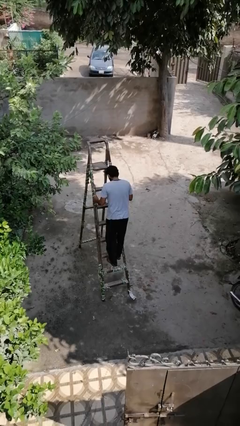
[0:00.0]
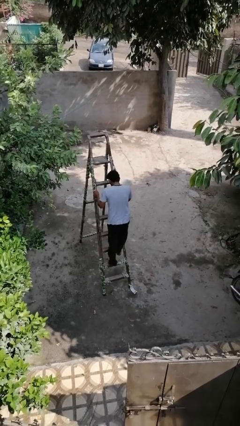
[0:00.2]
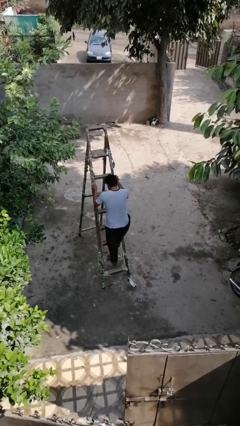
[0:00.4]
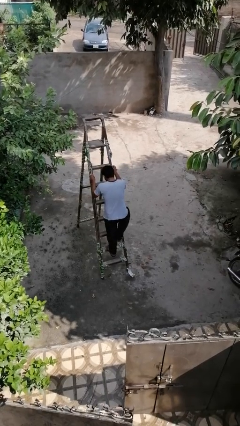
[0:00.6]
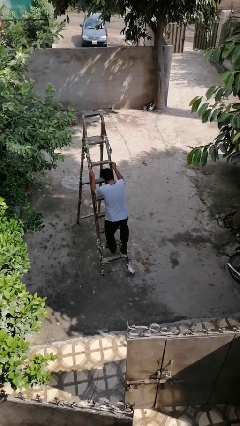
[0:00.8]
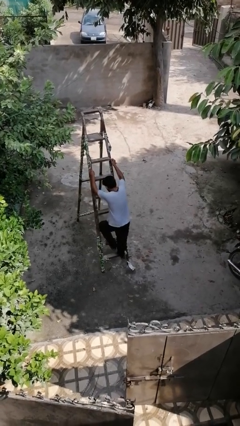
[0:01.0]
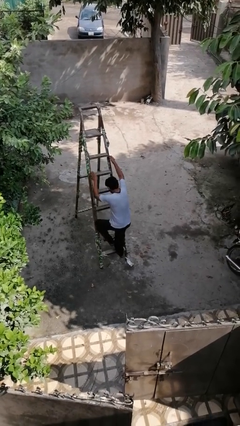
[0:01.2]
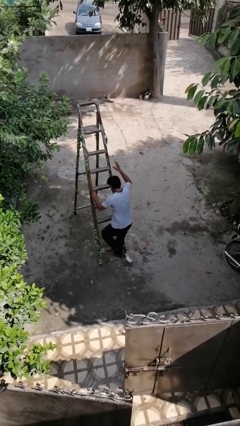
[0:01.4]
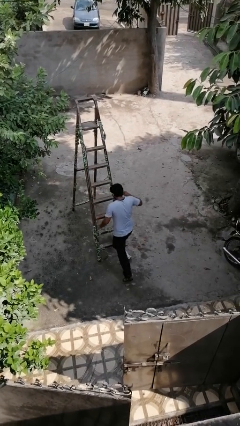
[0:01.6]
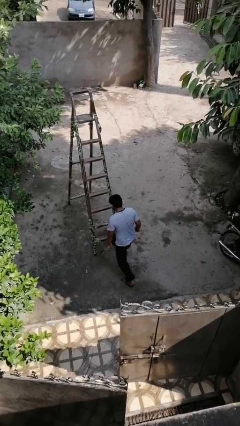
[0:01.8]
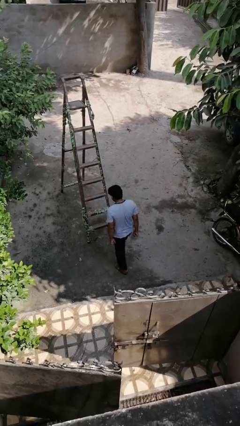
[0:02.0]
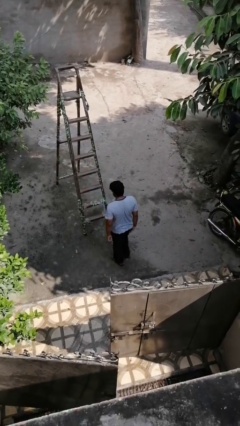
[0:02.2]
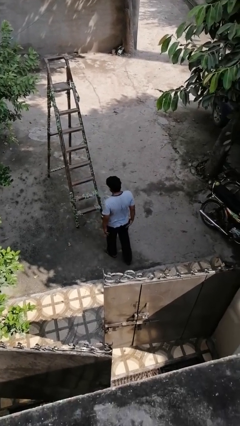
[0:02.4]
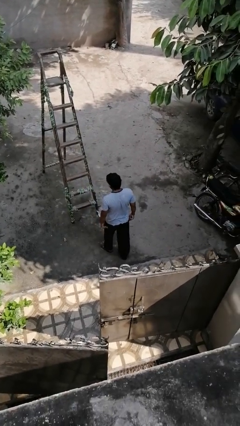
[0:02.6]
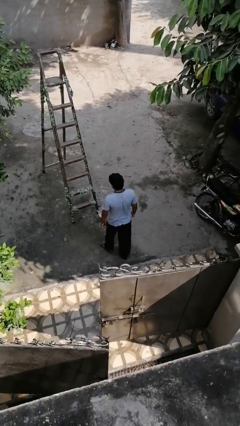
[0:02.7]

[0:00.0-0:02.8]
person climbs down ladder

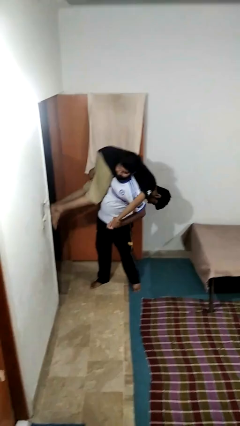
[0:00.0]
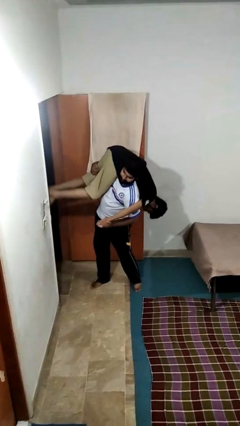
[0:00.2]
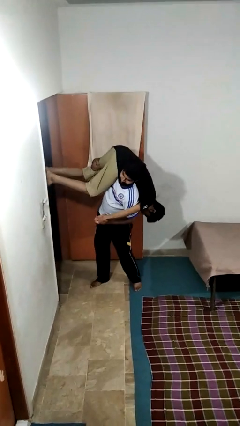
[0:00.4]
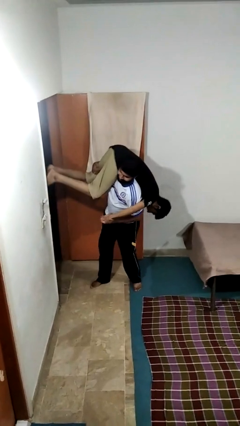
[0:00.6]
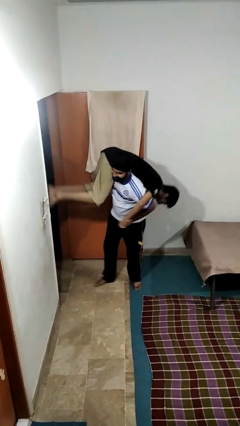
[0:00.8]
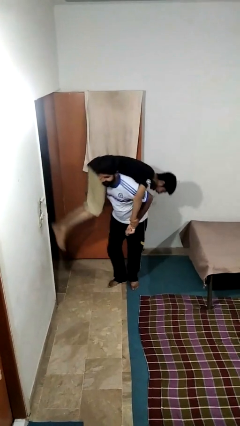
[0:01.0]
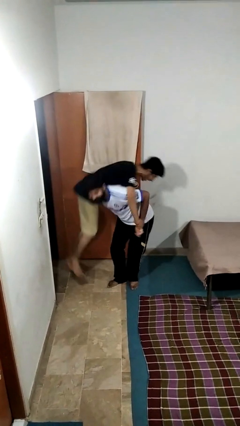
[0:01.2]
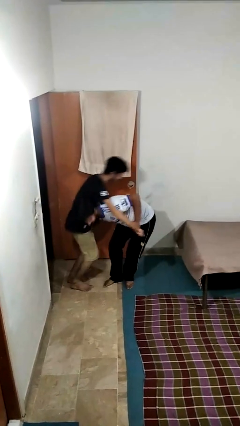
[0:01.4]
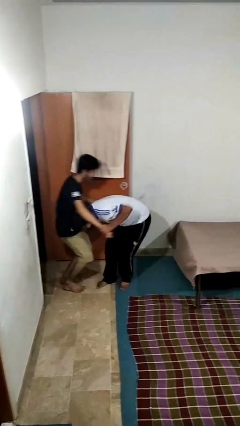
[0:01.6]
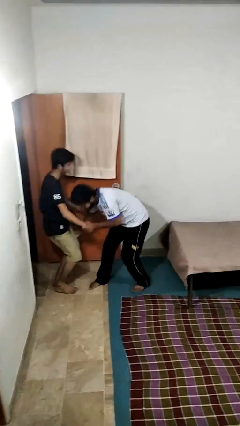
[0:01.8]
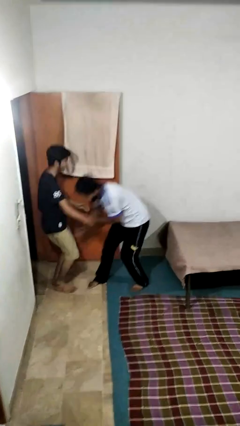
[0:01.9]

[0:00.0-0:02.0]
person puts down person

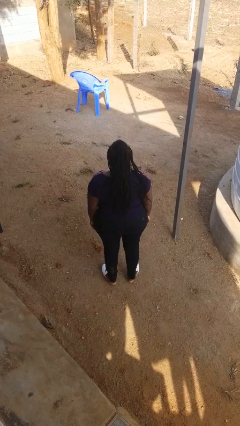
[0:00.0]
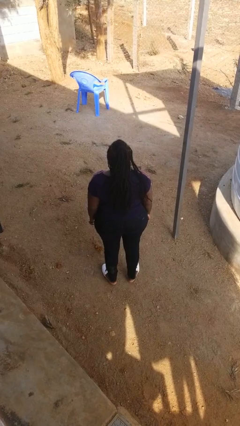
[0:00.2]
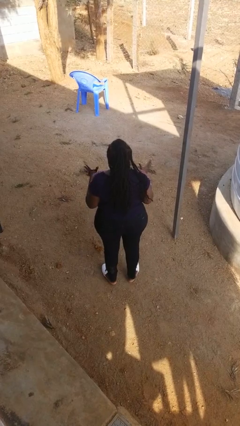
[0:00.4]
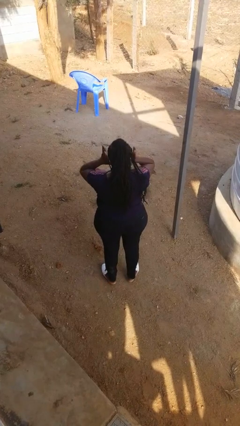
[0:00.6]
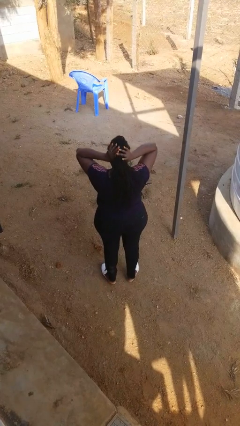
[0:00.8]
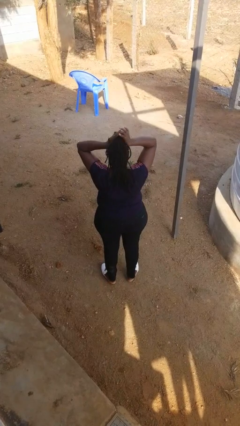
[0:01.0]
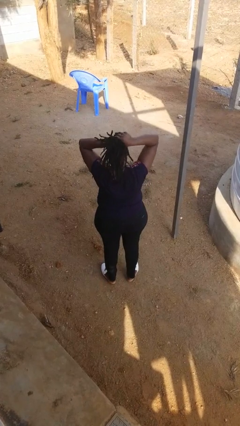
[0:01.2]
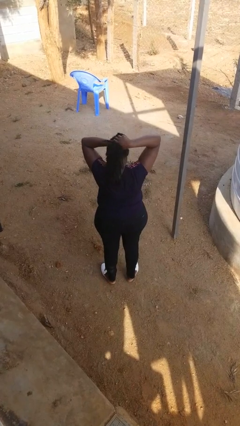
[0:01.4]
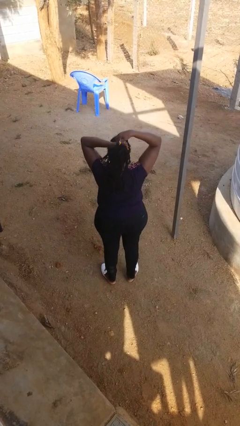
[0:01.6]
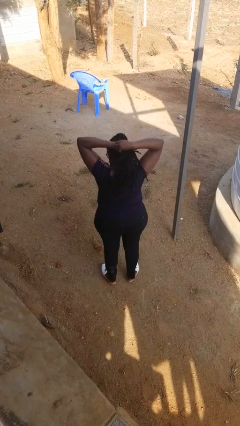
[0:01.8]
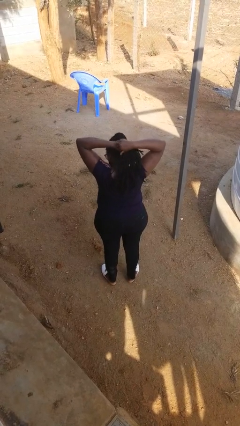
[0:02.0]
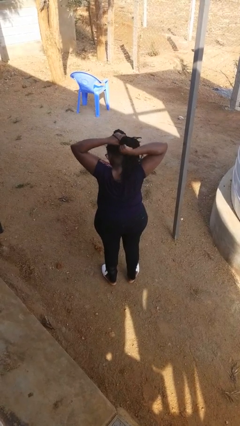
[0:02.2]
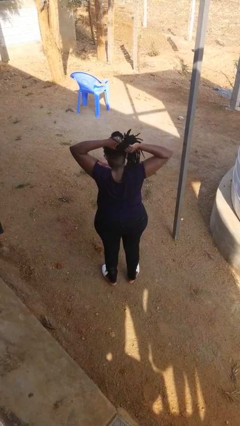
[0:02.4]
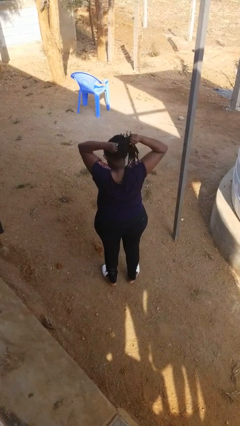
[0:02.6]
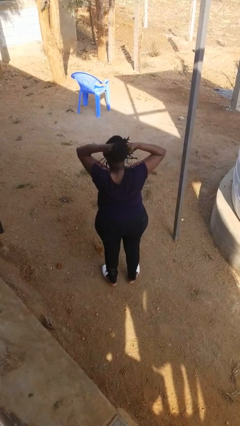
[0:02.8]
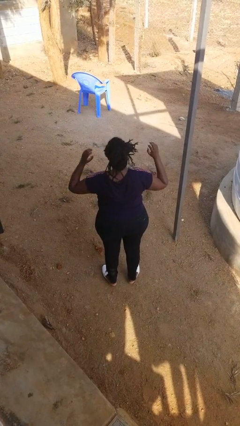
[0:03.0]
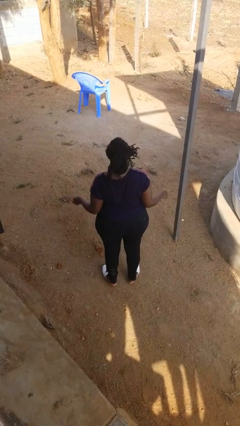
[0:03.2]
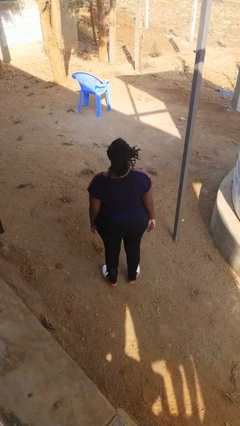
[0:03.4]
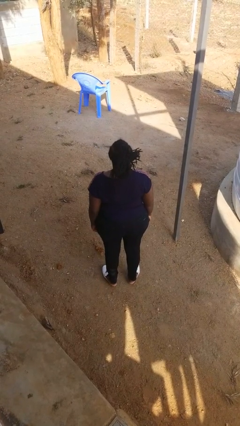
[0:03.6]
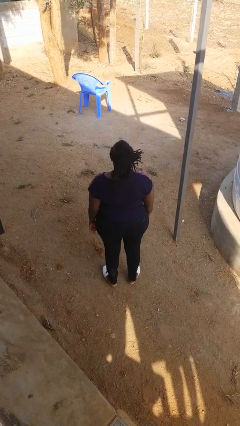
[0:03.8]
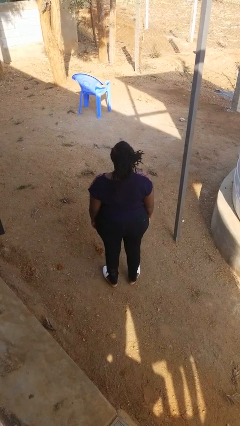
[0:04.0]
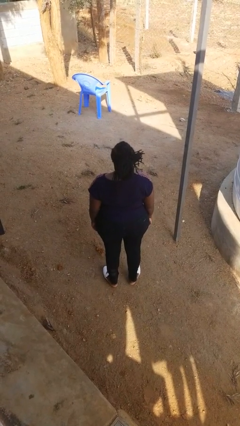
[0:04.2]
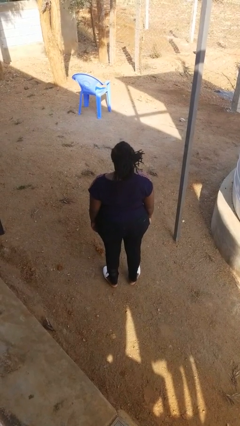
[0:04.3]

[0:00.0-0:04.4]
person puts hair in ponytail

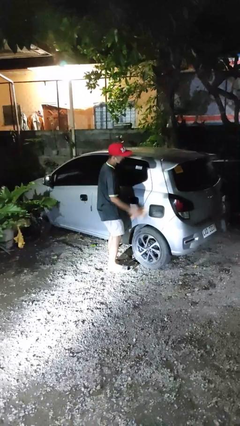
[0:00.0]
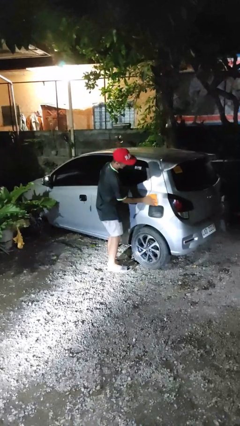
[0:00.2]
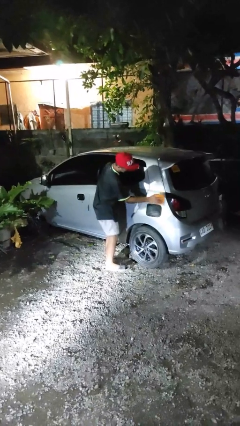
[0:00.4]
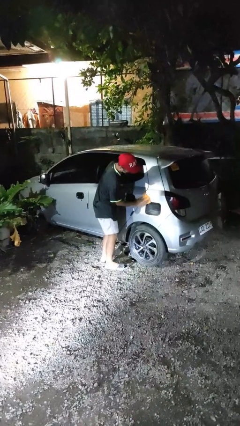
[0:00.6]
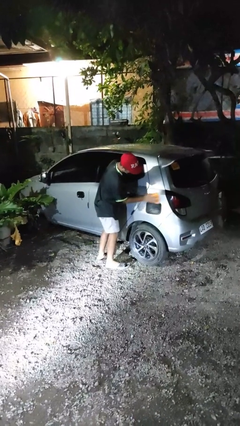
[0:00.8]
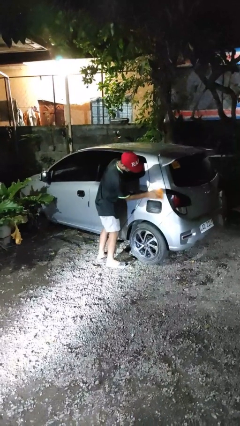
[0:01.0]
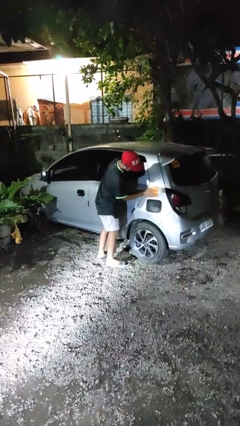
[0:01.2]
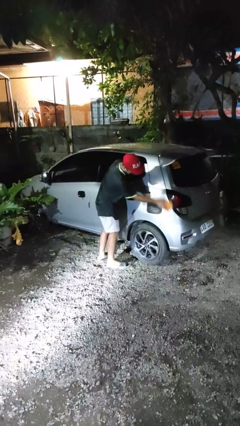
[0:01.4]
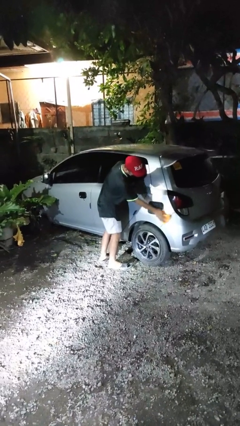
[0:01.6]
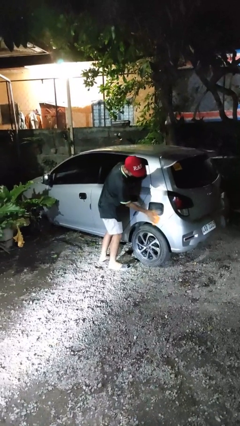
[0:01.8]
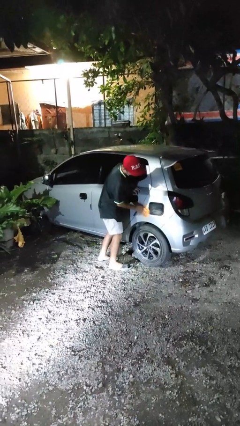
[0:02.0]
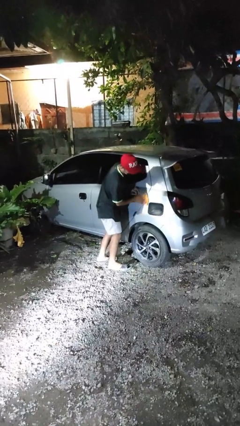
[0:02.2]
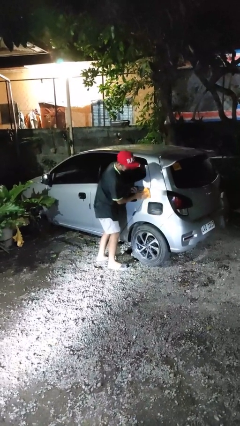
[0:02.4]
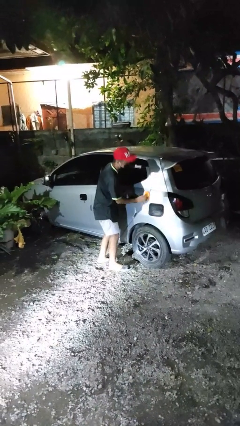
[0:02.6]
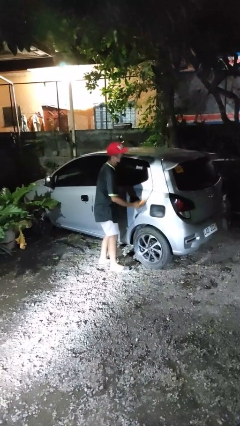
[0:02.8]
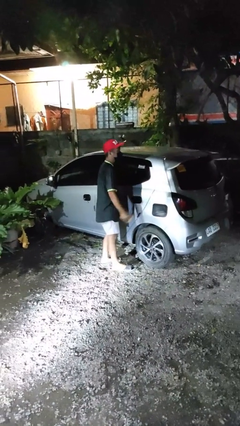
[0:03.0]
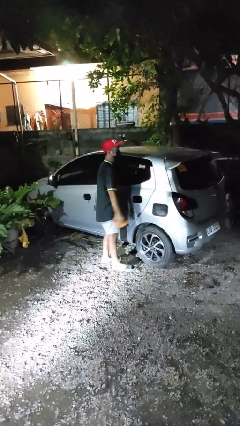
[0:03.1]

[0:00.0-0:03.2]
person polishes car with rag

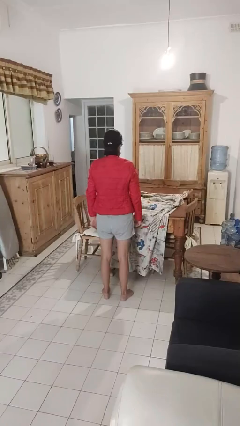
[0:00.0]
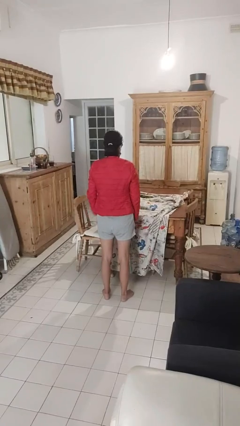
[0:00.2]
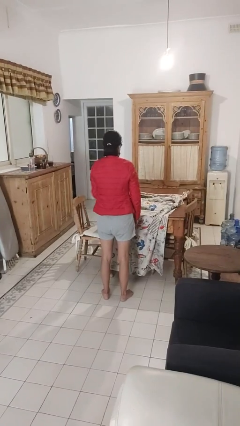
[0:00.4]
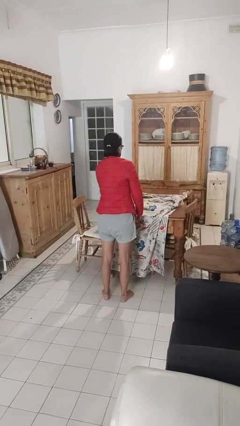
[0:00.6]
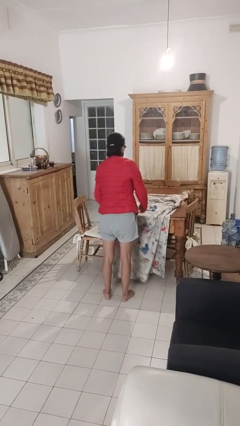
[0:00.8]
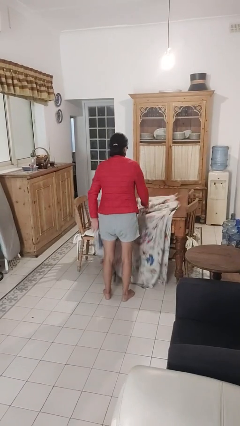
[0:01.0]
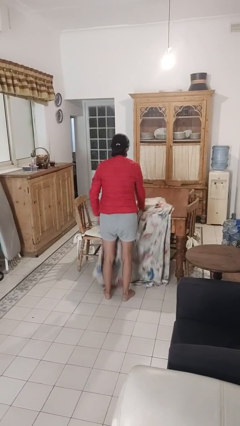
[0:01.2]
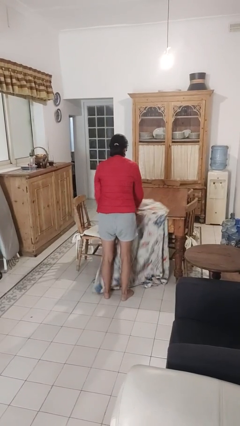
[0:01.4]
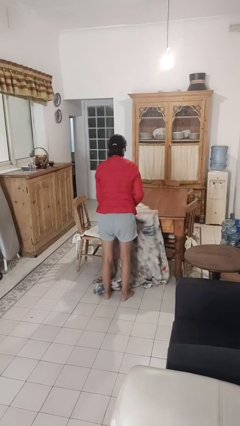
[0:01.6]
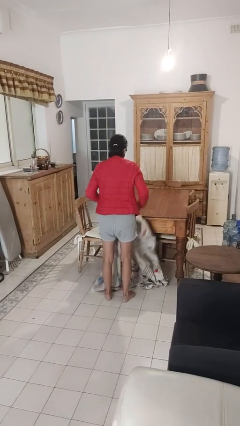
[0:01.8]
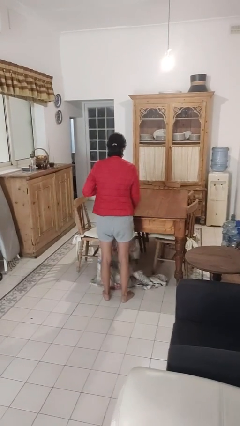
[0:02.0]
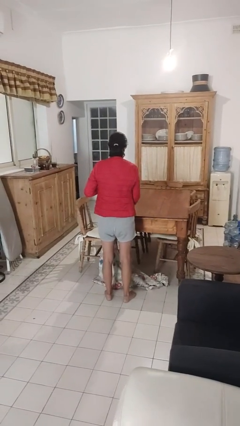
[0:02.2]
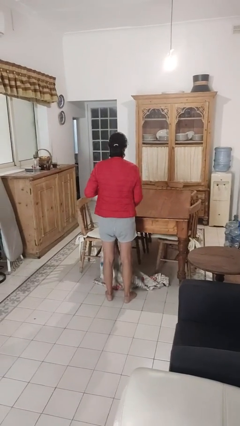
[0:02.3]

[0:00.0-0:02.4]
person folds tablecloth

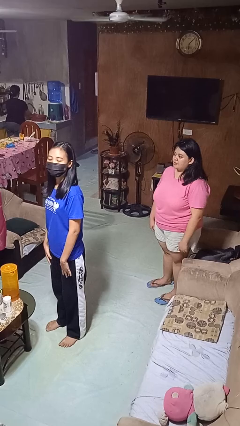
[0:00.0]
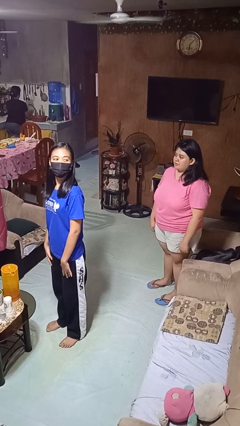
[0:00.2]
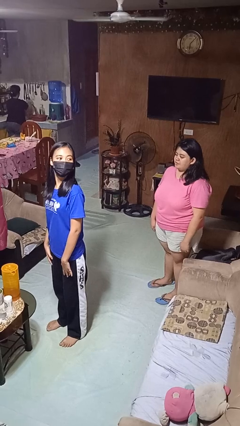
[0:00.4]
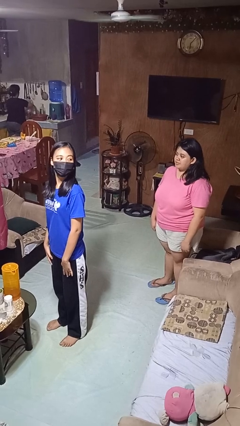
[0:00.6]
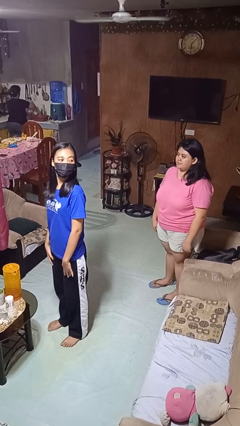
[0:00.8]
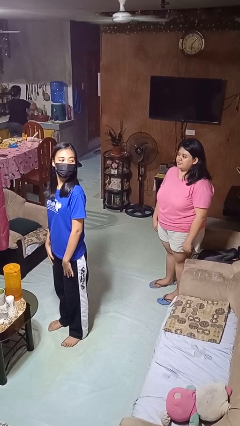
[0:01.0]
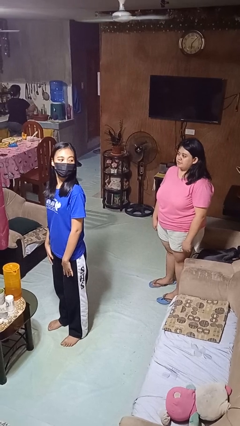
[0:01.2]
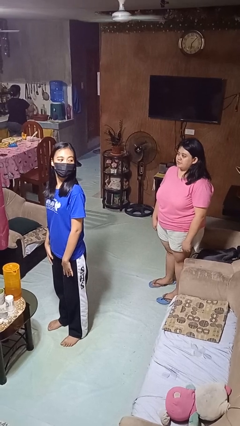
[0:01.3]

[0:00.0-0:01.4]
person looks over shoulder

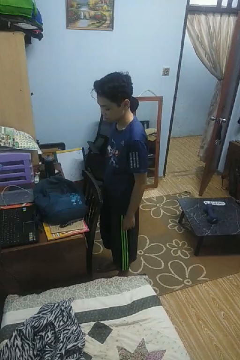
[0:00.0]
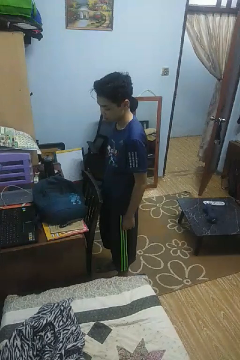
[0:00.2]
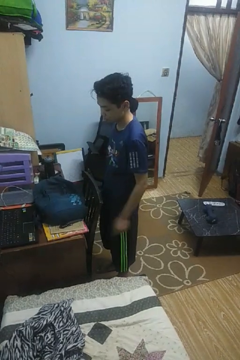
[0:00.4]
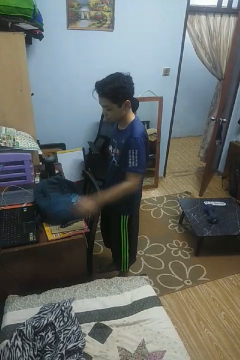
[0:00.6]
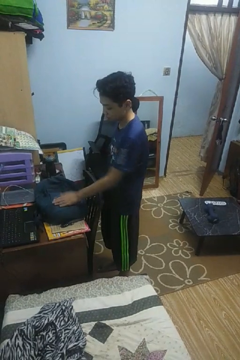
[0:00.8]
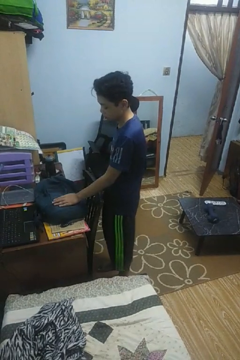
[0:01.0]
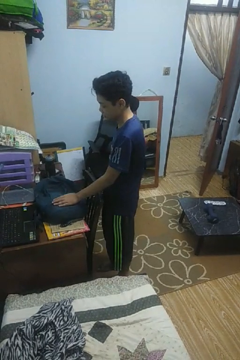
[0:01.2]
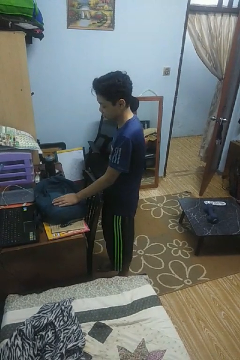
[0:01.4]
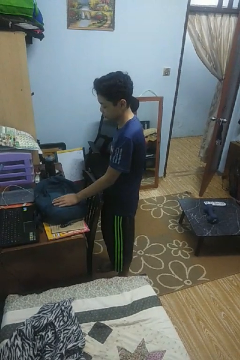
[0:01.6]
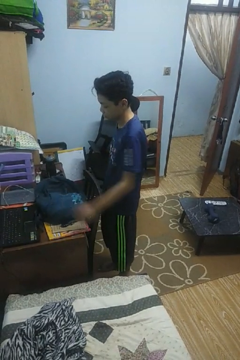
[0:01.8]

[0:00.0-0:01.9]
person taps object with finger
